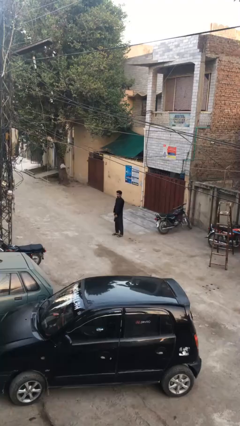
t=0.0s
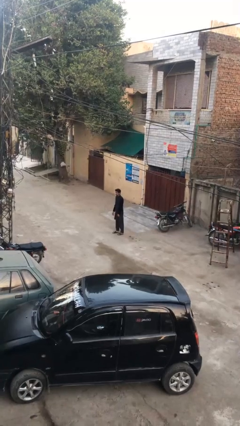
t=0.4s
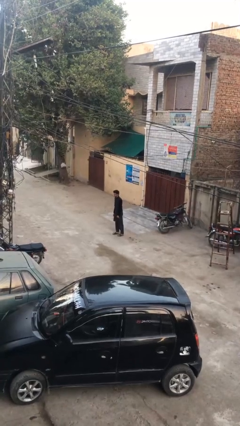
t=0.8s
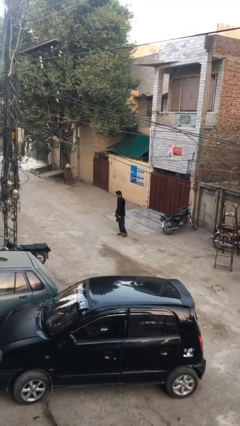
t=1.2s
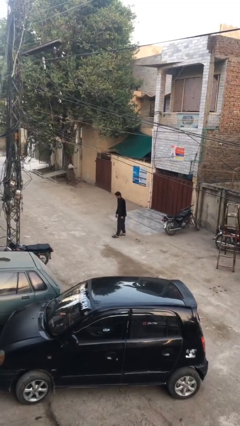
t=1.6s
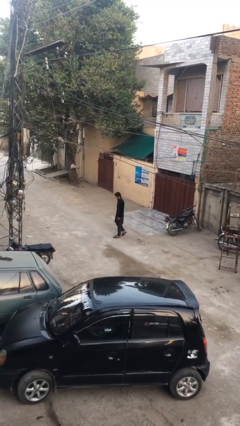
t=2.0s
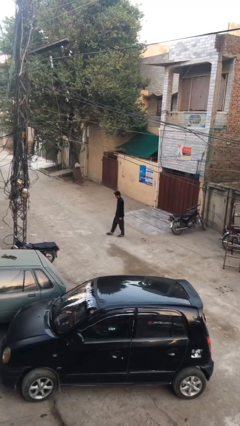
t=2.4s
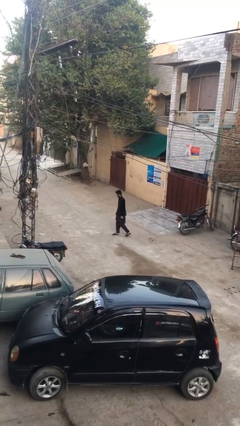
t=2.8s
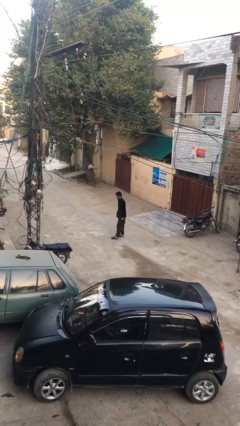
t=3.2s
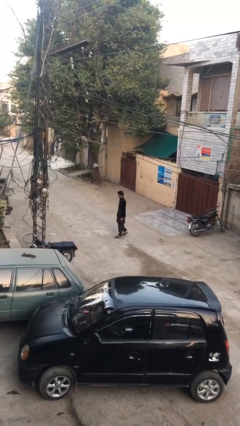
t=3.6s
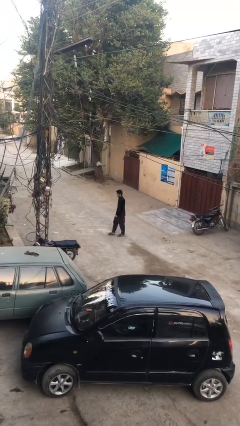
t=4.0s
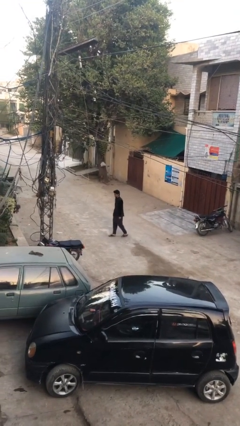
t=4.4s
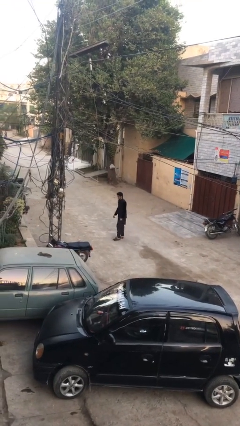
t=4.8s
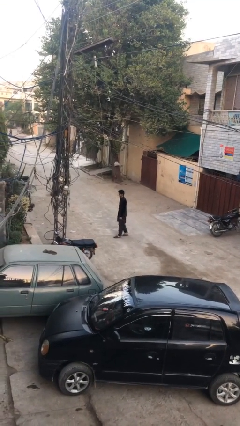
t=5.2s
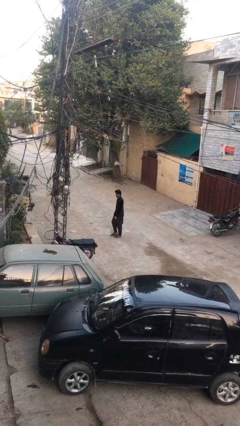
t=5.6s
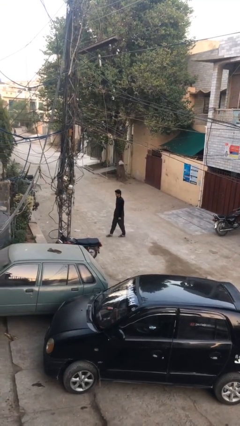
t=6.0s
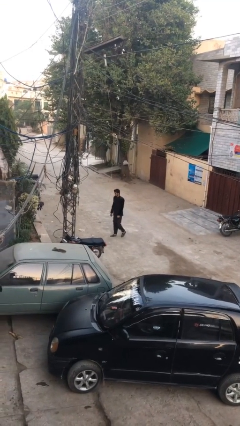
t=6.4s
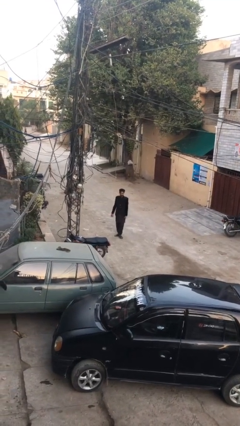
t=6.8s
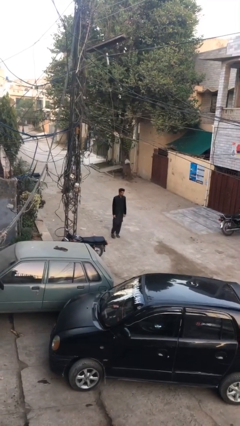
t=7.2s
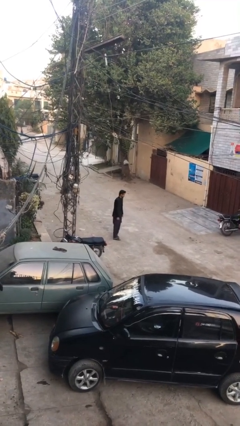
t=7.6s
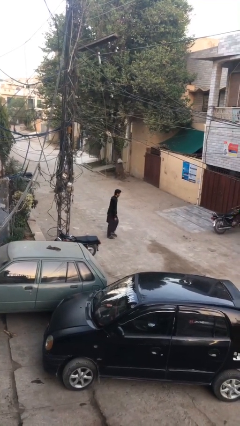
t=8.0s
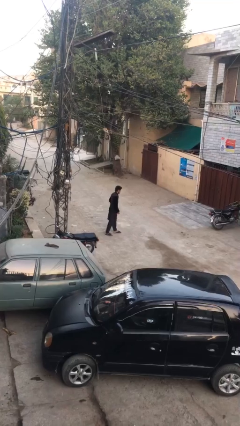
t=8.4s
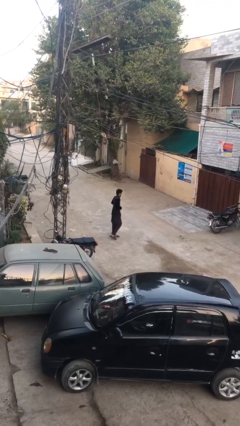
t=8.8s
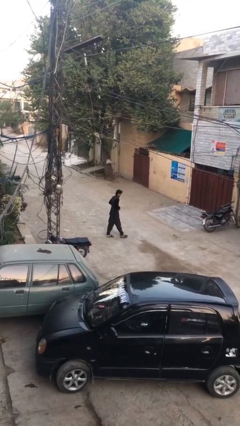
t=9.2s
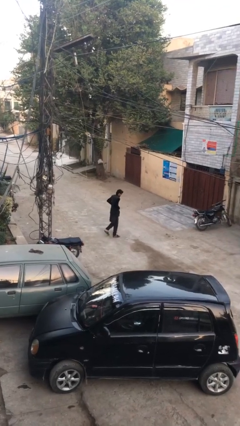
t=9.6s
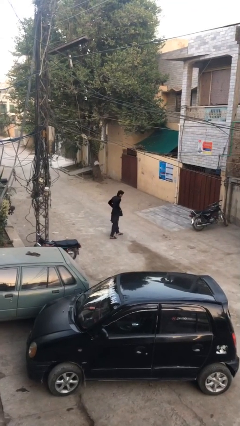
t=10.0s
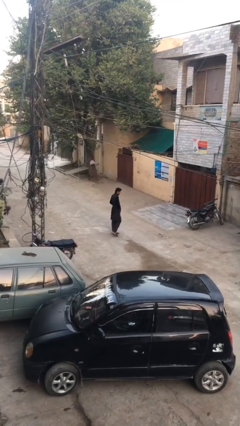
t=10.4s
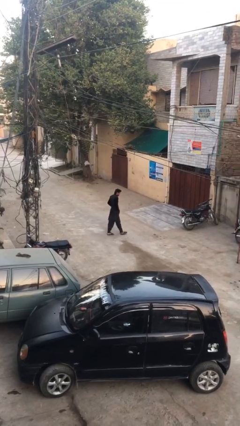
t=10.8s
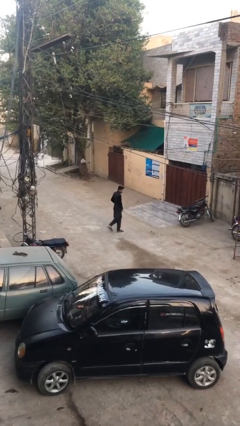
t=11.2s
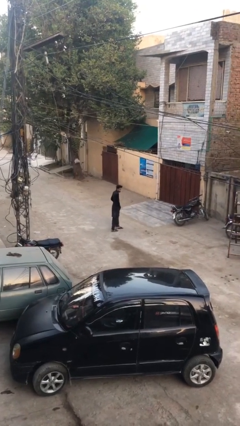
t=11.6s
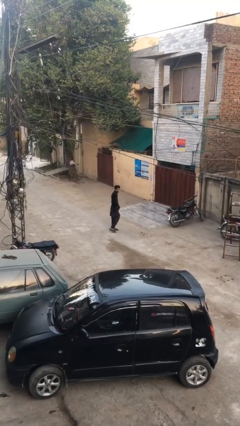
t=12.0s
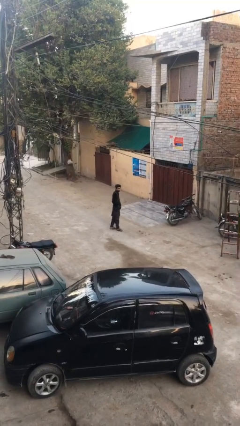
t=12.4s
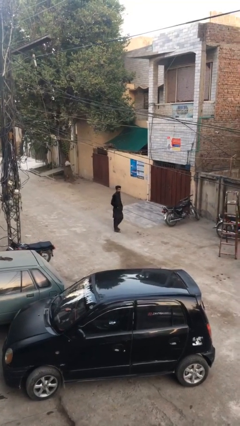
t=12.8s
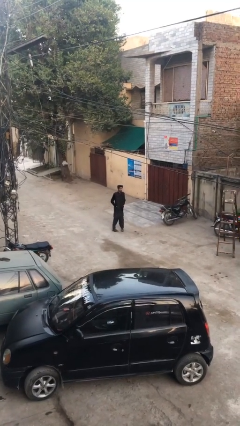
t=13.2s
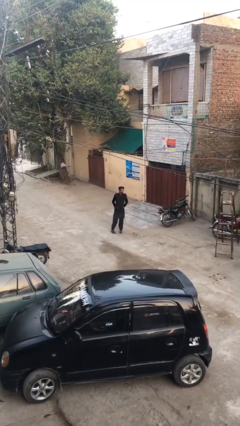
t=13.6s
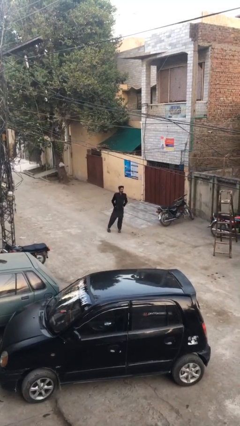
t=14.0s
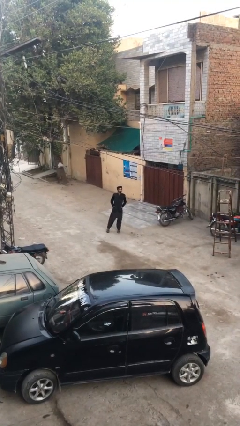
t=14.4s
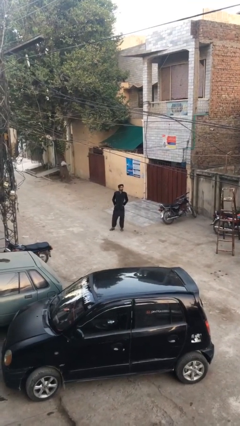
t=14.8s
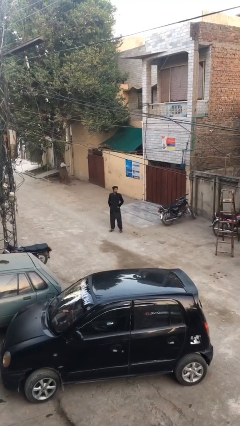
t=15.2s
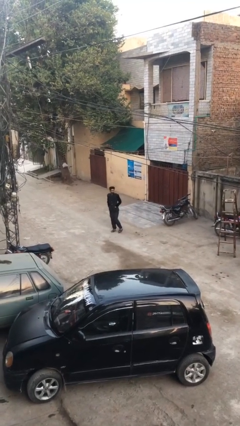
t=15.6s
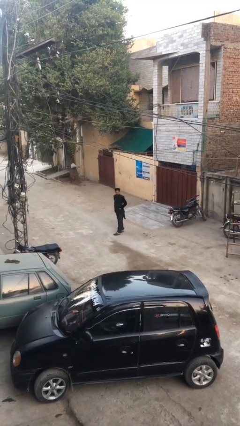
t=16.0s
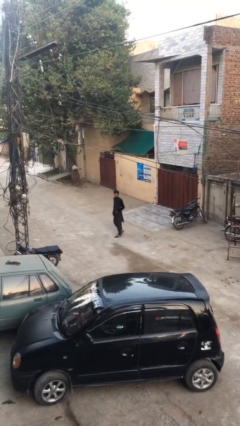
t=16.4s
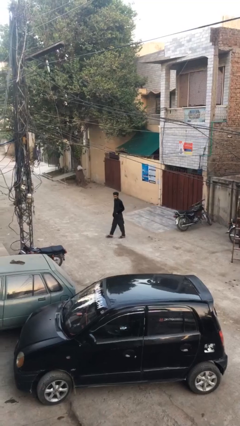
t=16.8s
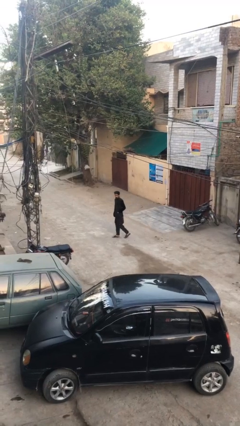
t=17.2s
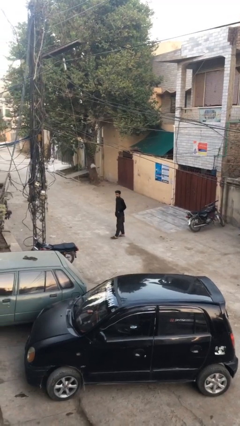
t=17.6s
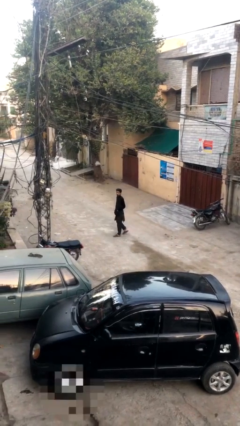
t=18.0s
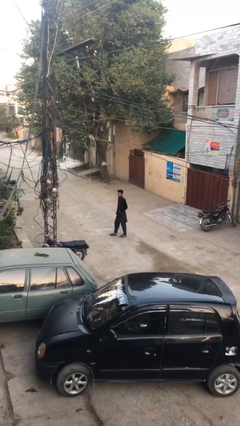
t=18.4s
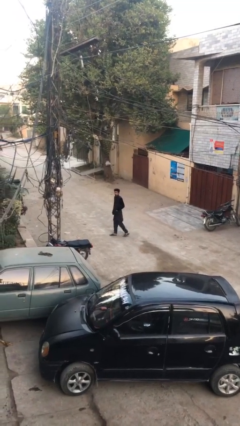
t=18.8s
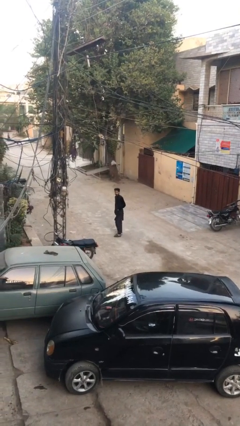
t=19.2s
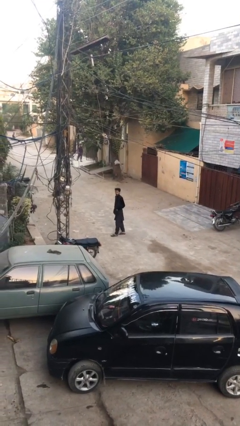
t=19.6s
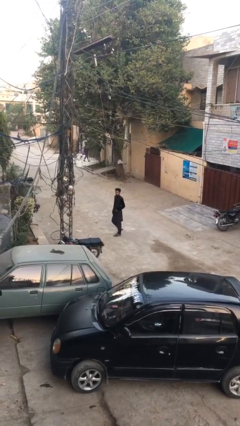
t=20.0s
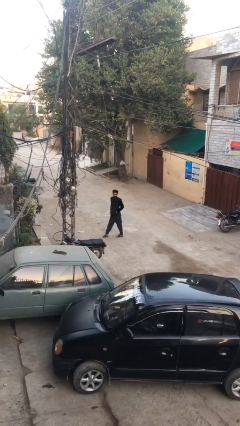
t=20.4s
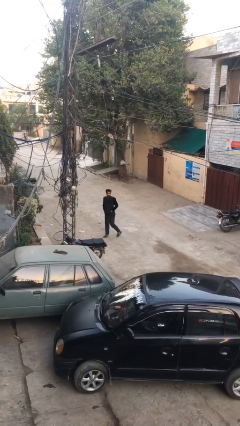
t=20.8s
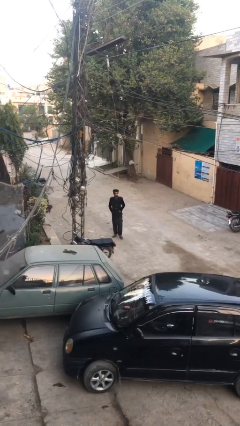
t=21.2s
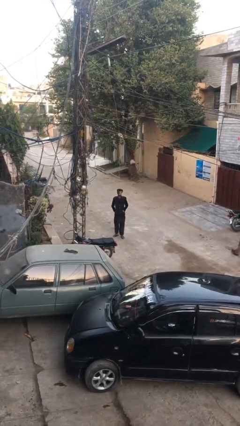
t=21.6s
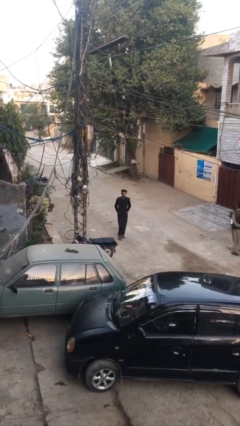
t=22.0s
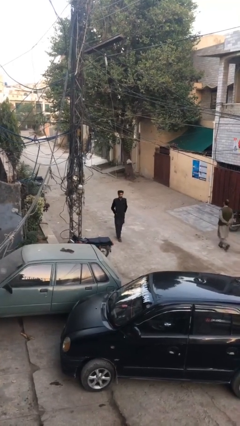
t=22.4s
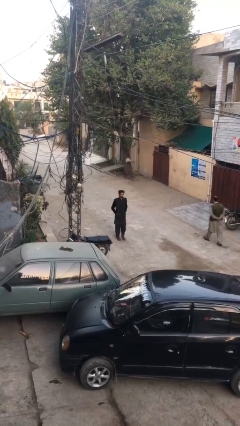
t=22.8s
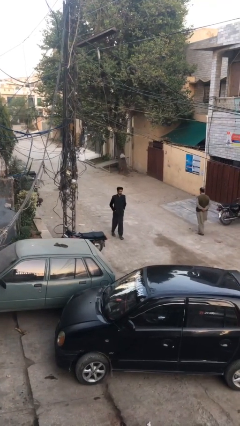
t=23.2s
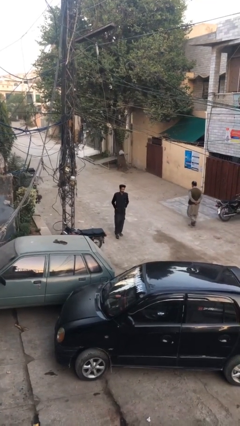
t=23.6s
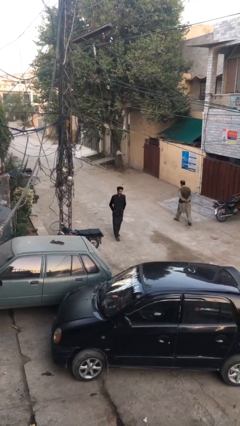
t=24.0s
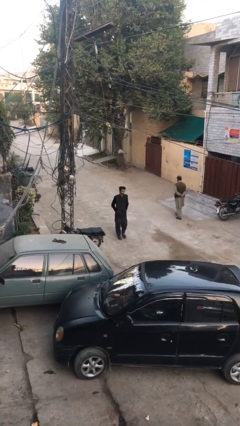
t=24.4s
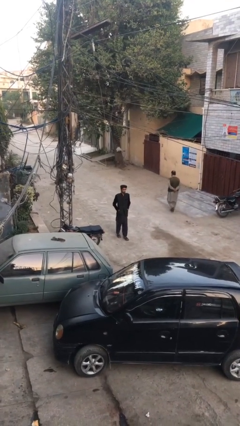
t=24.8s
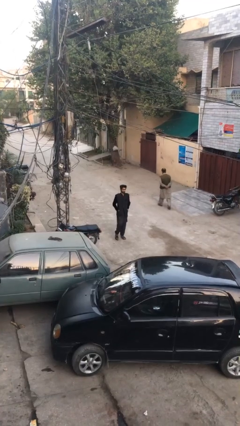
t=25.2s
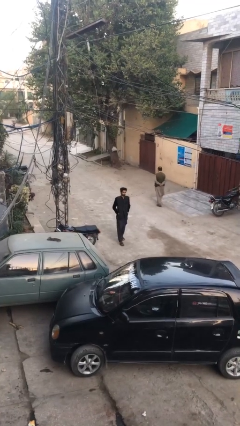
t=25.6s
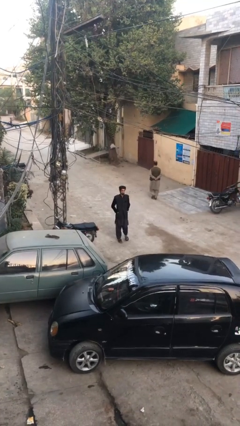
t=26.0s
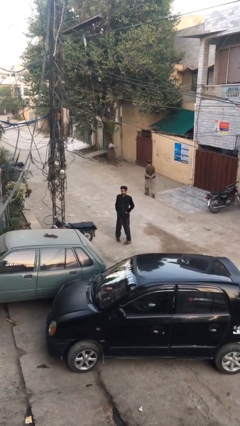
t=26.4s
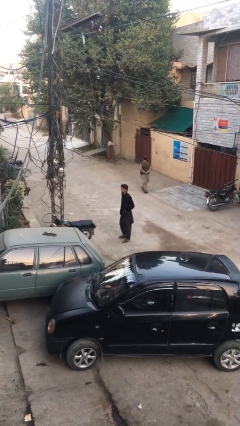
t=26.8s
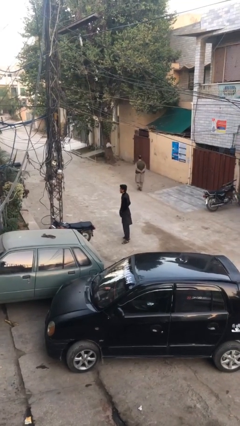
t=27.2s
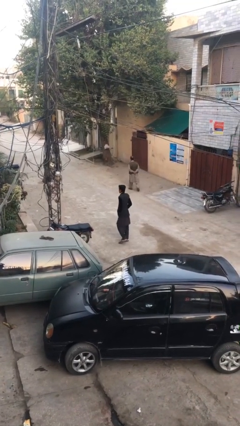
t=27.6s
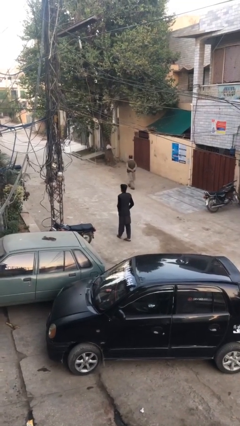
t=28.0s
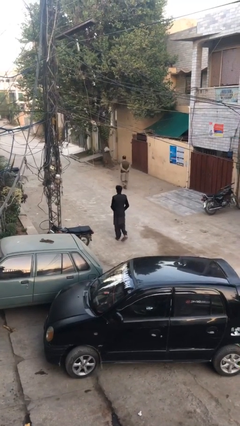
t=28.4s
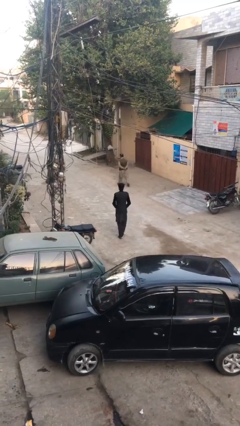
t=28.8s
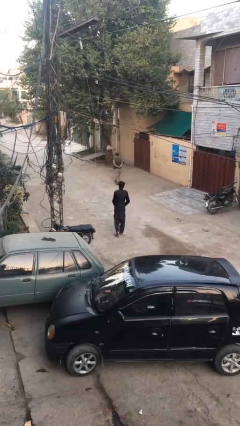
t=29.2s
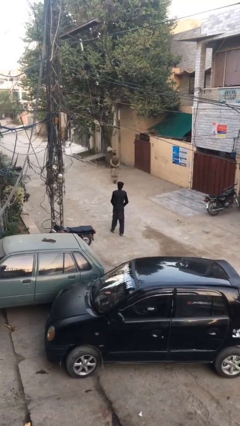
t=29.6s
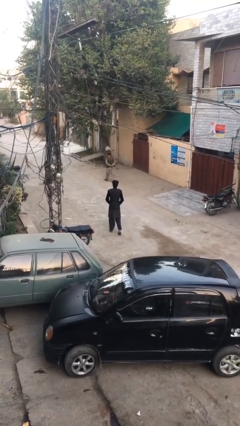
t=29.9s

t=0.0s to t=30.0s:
person walks

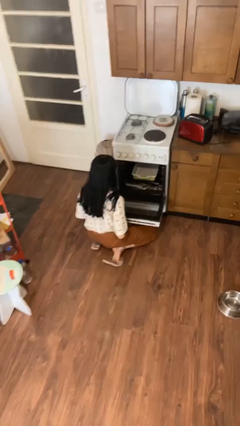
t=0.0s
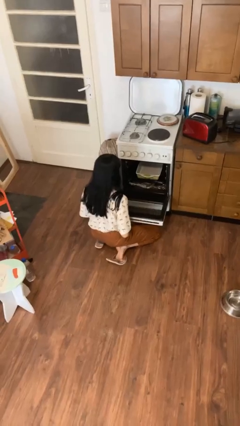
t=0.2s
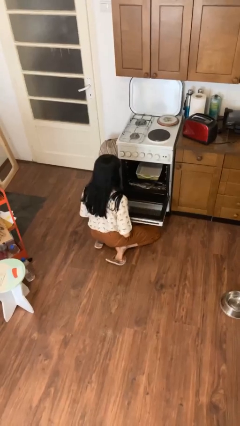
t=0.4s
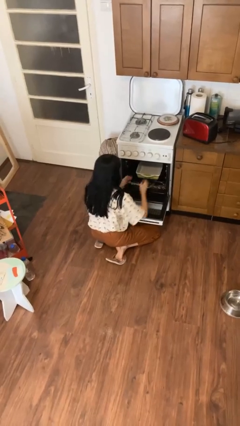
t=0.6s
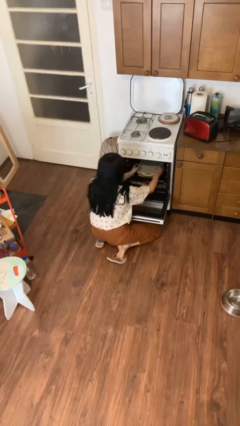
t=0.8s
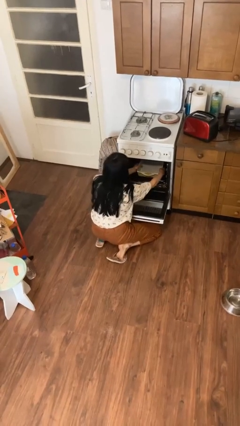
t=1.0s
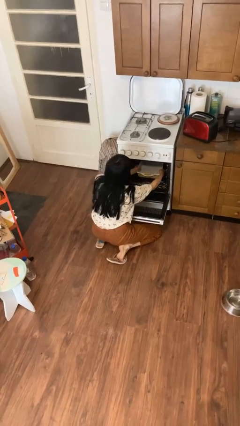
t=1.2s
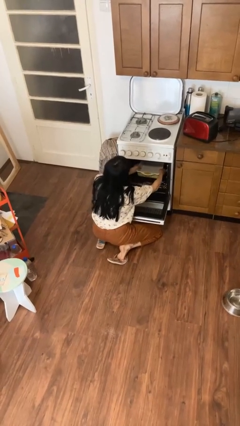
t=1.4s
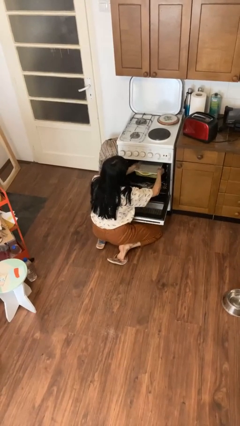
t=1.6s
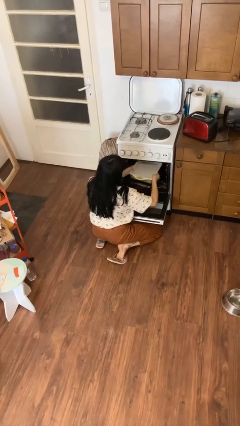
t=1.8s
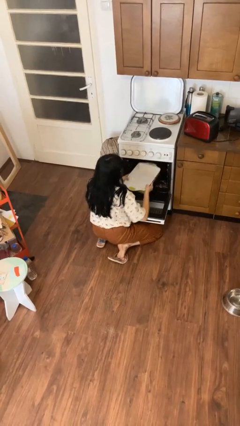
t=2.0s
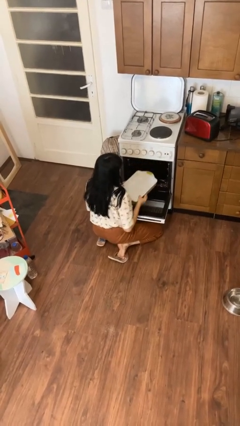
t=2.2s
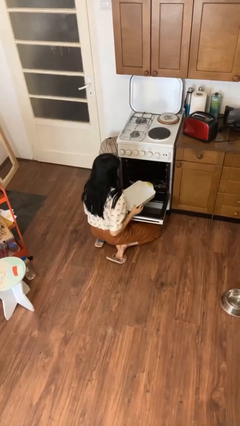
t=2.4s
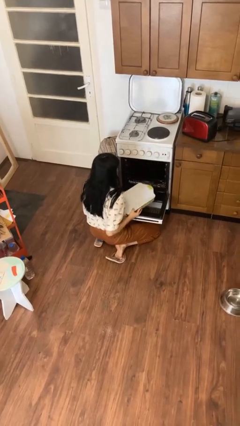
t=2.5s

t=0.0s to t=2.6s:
person takes object from oven
